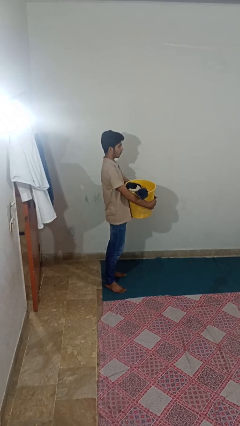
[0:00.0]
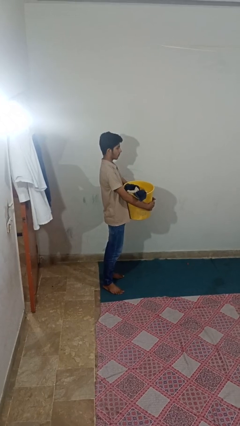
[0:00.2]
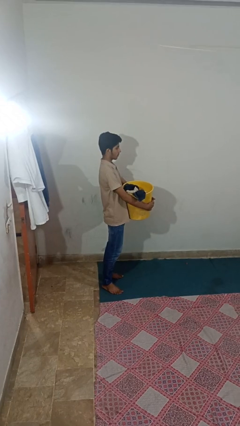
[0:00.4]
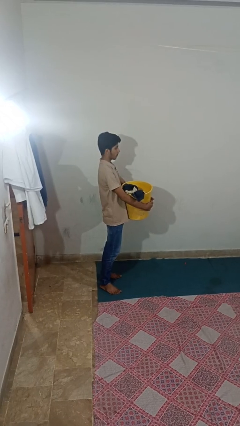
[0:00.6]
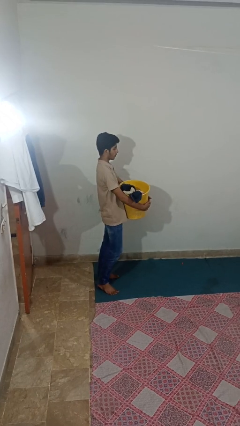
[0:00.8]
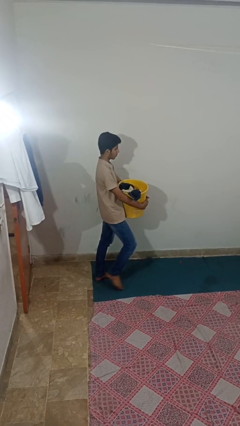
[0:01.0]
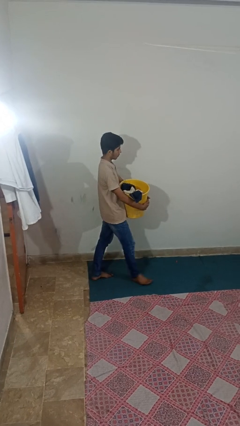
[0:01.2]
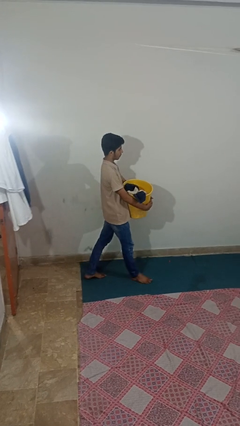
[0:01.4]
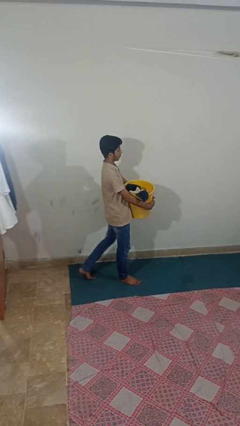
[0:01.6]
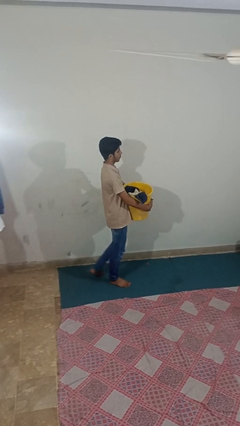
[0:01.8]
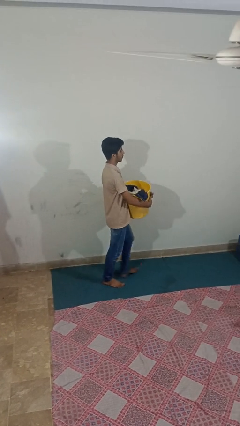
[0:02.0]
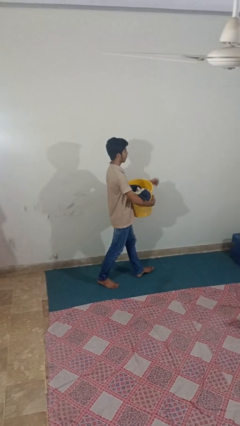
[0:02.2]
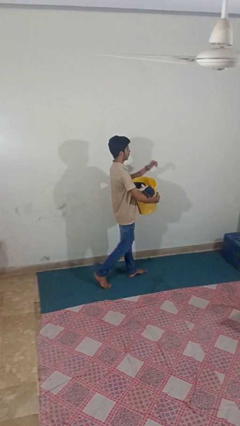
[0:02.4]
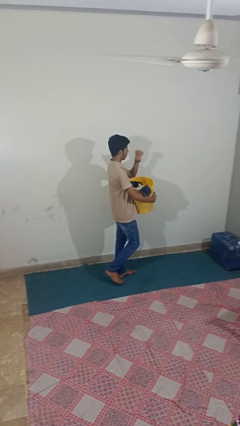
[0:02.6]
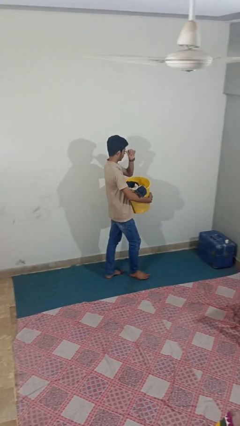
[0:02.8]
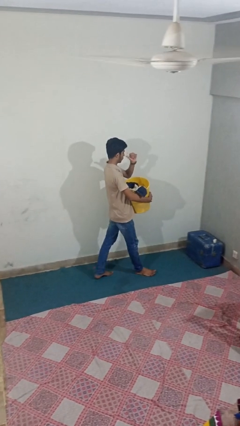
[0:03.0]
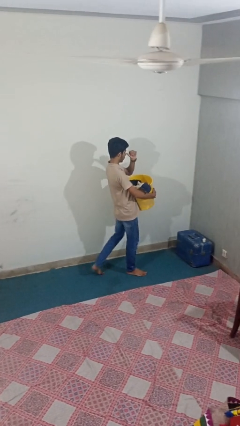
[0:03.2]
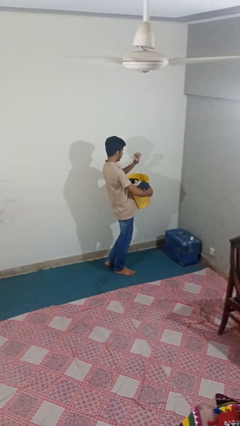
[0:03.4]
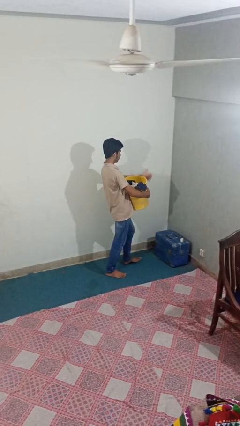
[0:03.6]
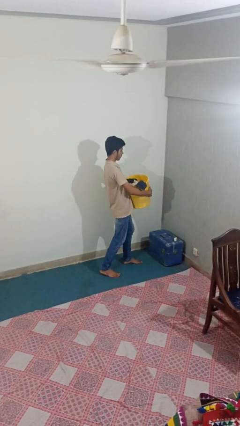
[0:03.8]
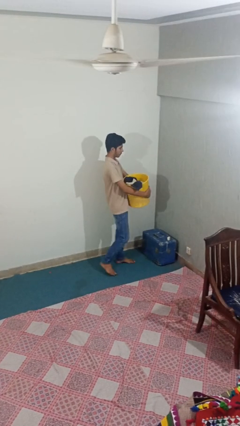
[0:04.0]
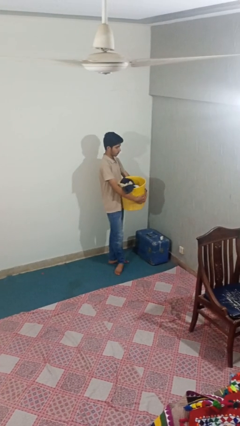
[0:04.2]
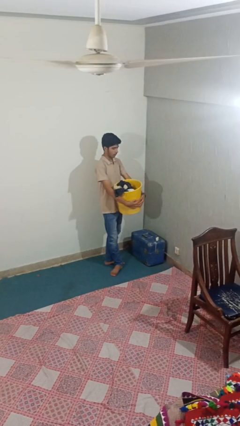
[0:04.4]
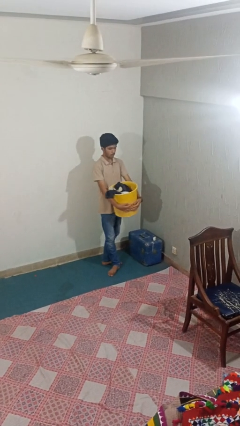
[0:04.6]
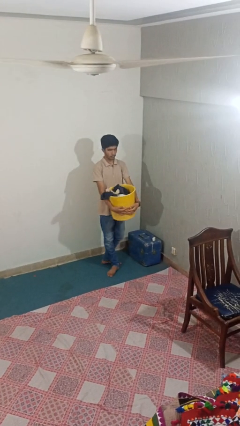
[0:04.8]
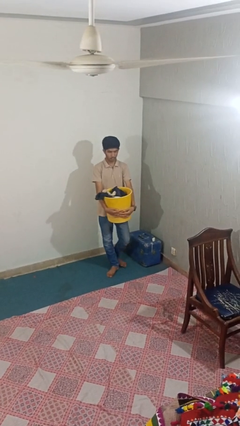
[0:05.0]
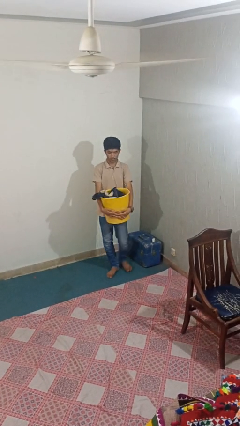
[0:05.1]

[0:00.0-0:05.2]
person carries laundry basket

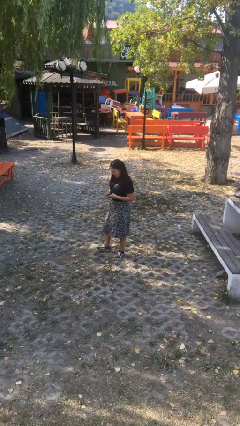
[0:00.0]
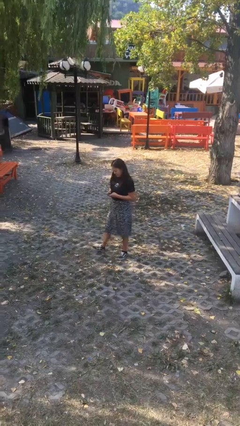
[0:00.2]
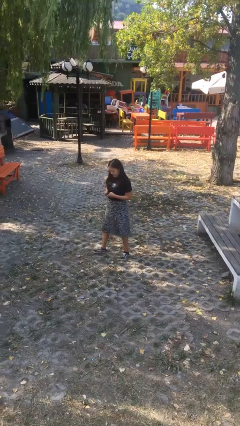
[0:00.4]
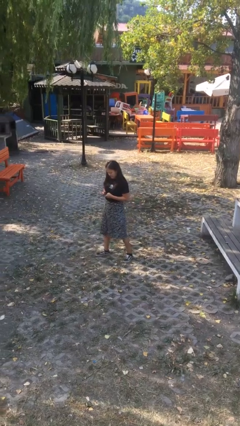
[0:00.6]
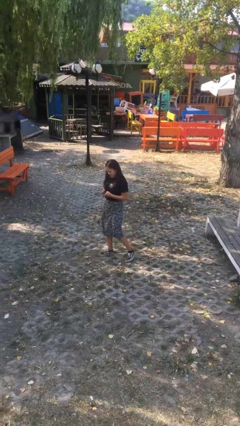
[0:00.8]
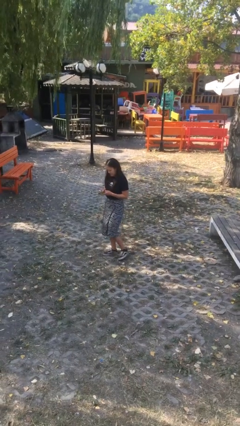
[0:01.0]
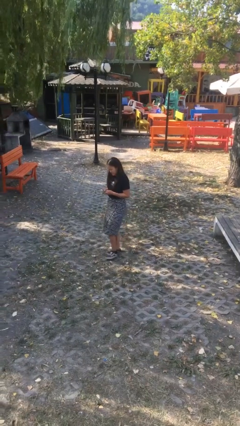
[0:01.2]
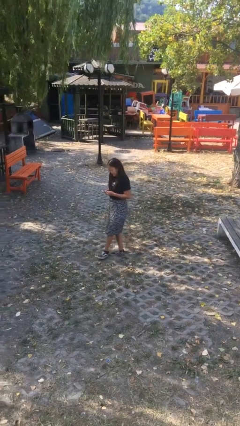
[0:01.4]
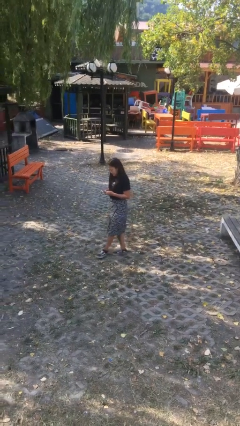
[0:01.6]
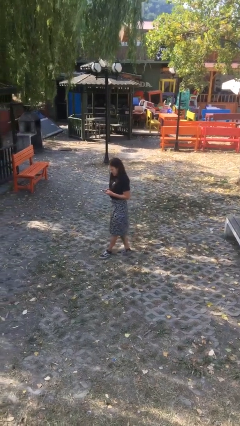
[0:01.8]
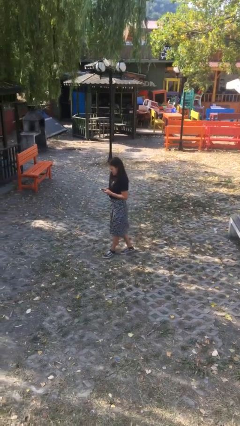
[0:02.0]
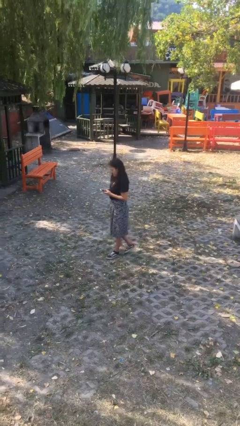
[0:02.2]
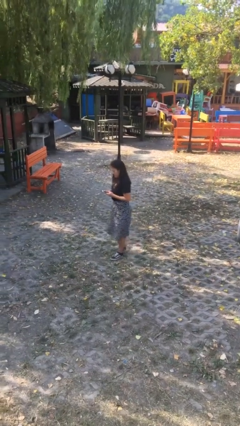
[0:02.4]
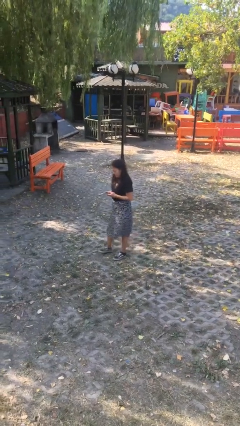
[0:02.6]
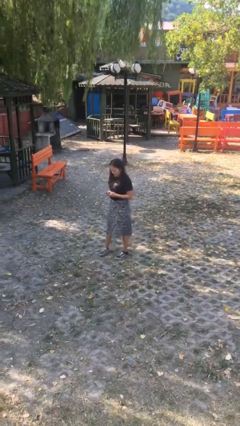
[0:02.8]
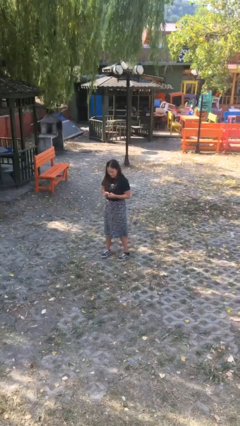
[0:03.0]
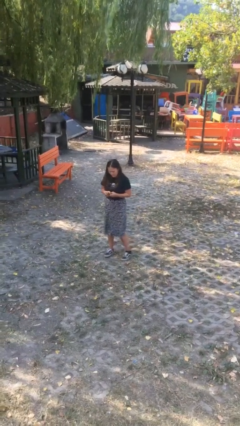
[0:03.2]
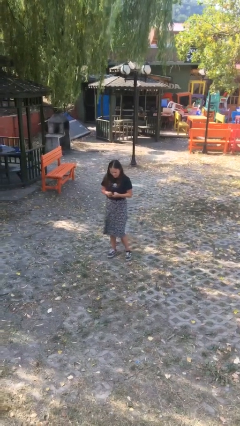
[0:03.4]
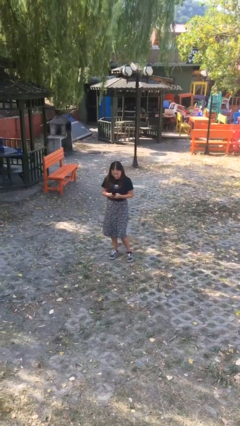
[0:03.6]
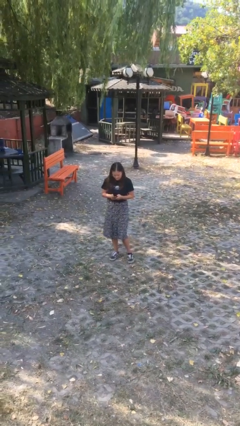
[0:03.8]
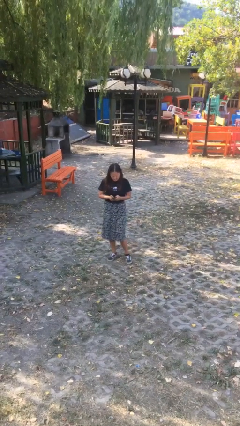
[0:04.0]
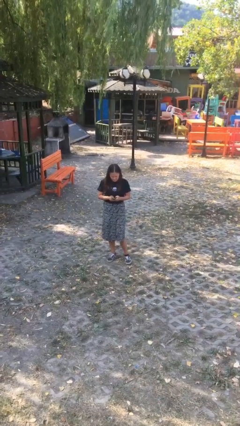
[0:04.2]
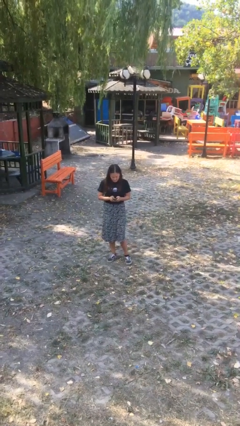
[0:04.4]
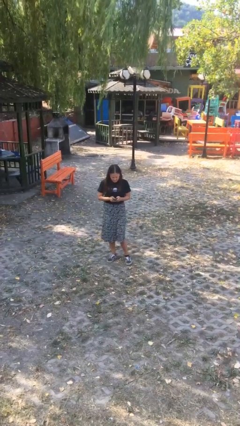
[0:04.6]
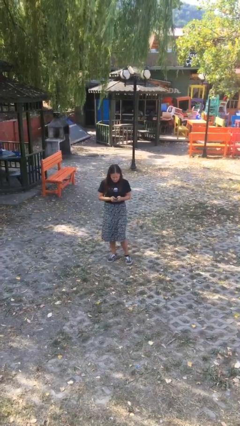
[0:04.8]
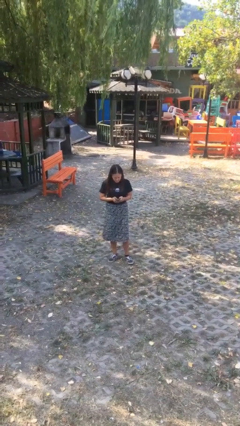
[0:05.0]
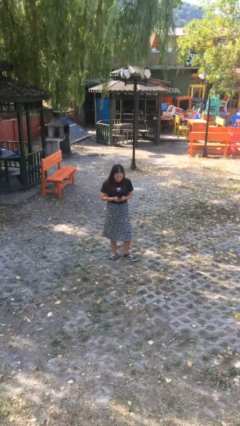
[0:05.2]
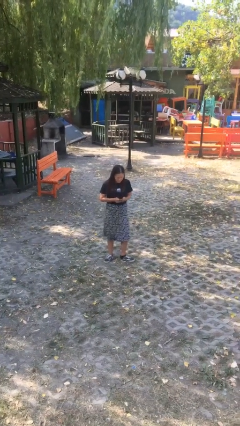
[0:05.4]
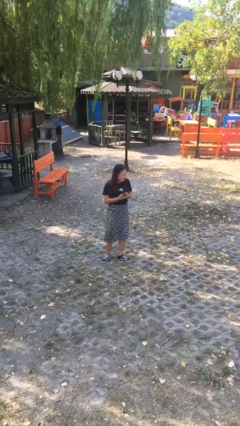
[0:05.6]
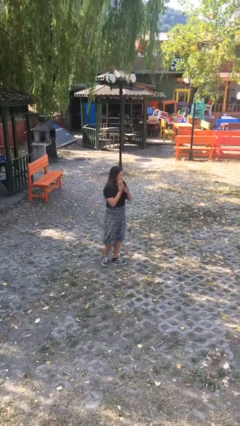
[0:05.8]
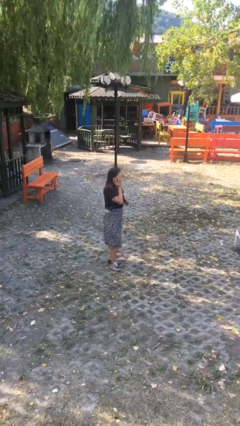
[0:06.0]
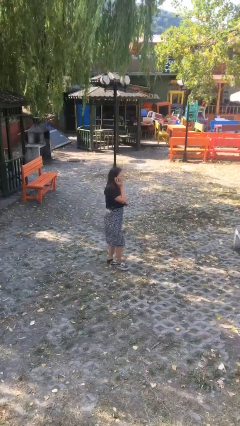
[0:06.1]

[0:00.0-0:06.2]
person texts on phone

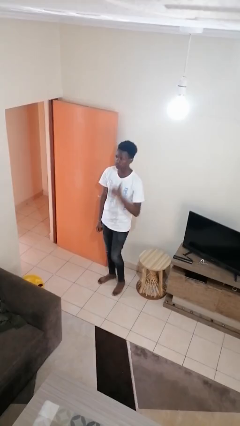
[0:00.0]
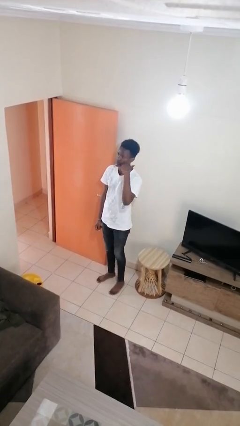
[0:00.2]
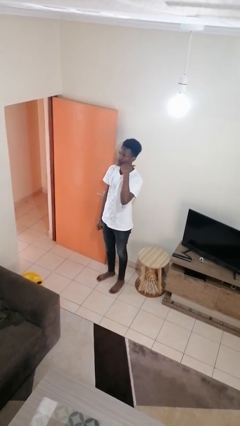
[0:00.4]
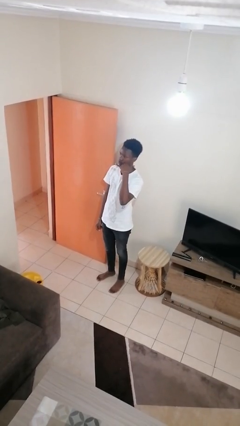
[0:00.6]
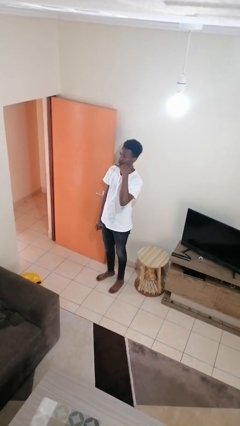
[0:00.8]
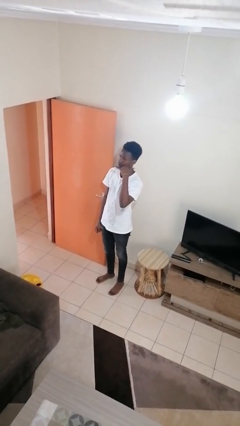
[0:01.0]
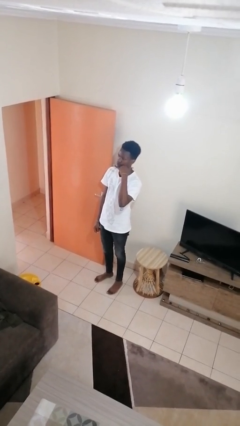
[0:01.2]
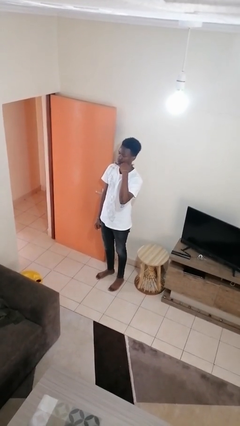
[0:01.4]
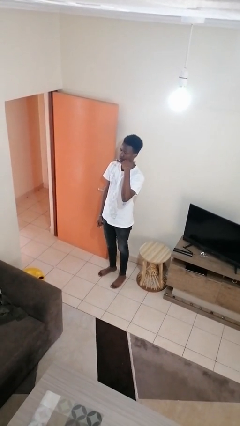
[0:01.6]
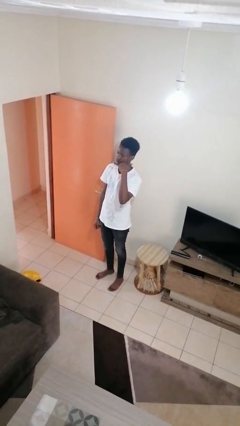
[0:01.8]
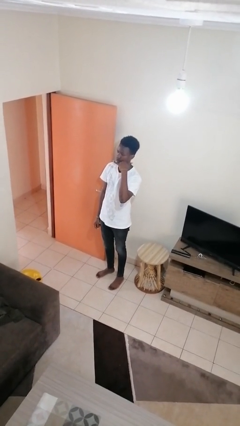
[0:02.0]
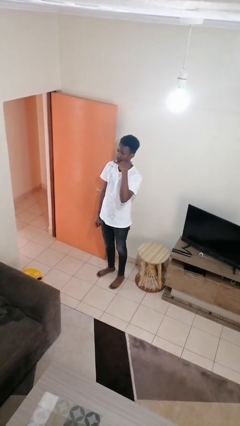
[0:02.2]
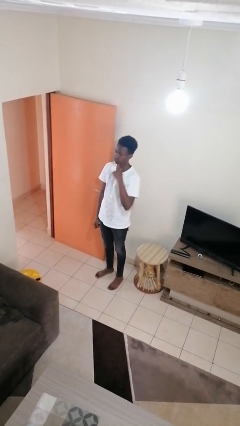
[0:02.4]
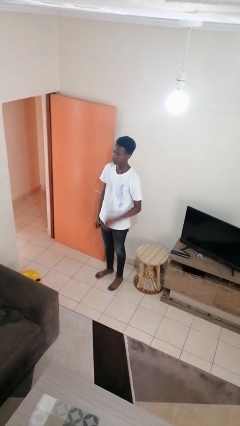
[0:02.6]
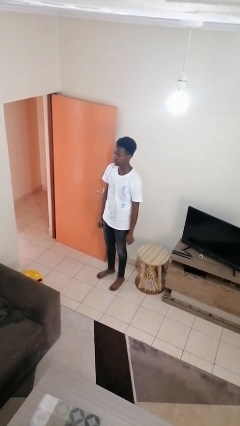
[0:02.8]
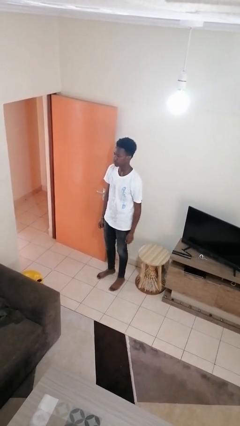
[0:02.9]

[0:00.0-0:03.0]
person gestures call me

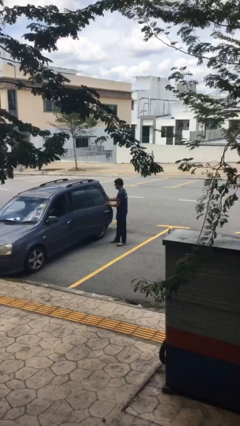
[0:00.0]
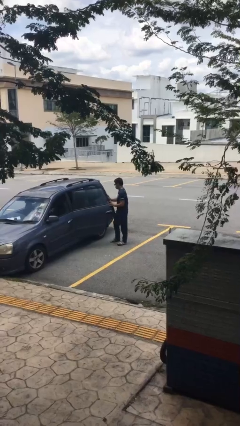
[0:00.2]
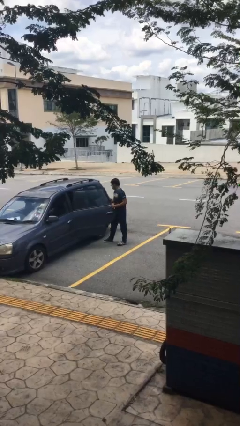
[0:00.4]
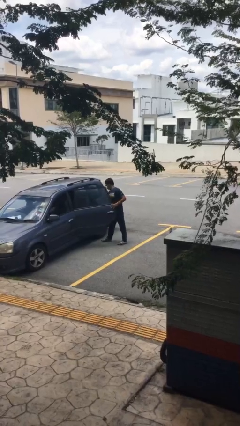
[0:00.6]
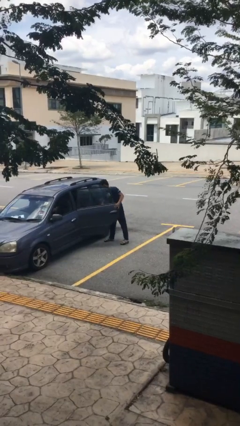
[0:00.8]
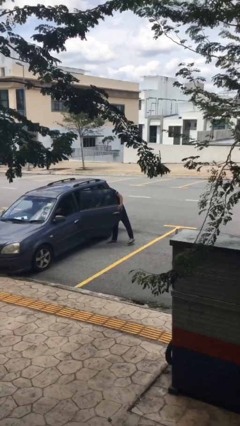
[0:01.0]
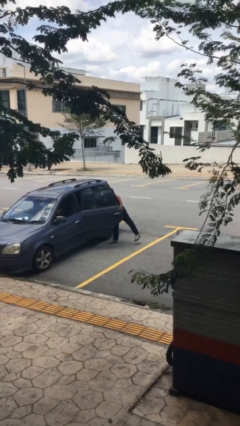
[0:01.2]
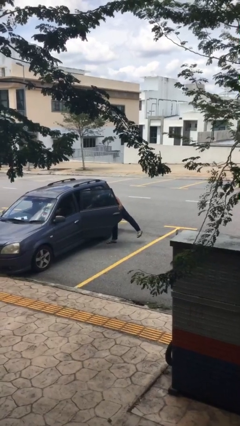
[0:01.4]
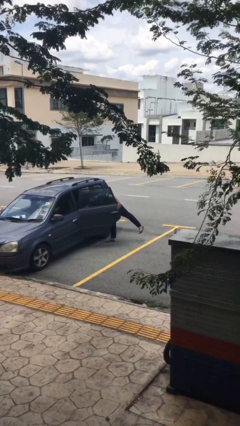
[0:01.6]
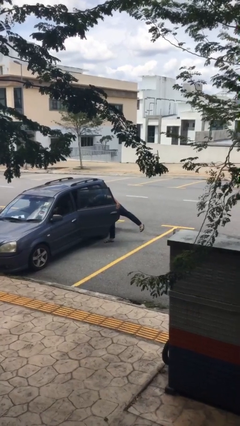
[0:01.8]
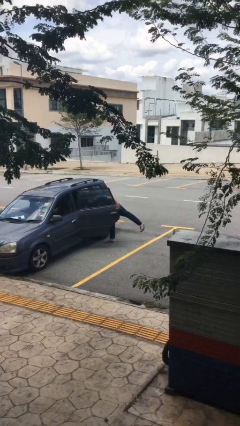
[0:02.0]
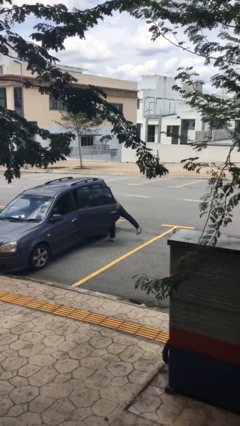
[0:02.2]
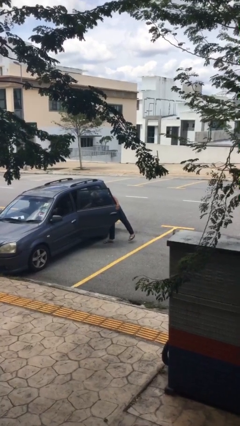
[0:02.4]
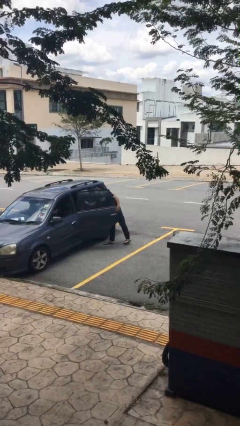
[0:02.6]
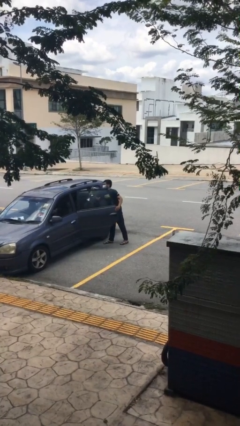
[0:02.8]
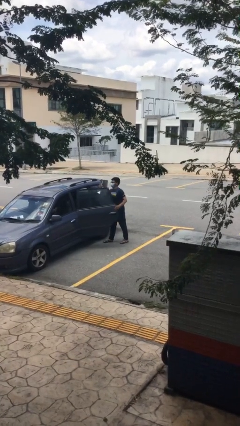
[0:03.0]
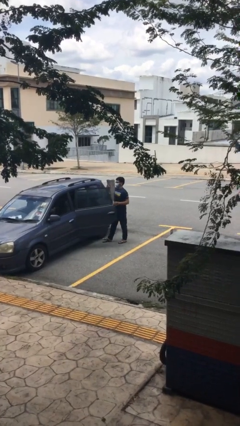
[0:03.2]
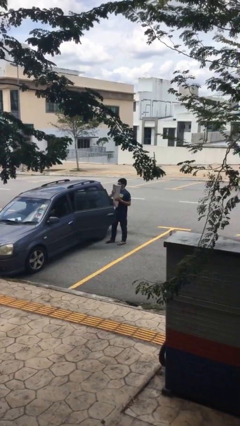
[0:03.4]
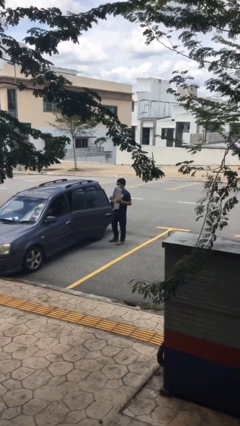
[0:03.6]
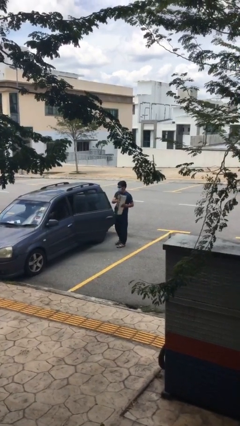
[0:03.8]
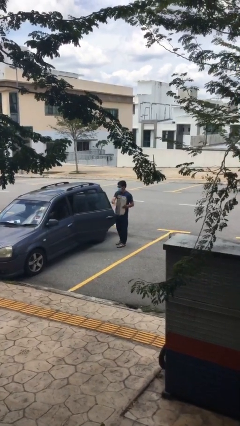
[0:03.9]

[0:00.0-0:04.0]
person unloads car
